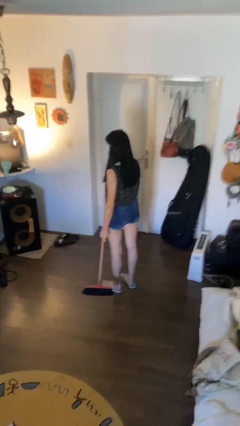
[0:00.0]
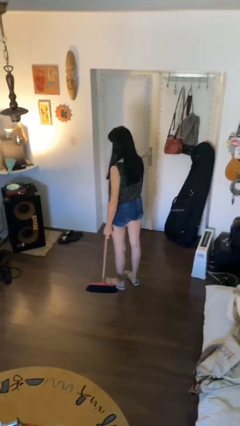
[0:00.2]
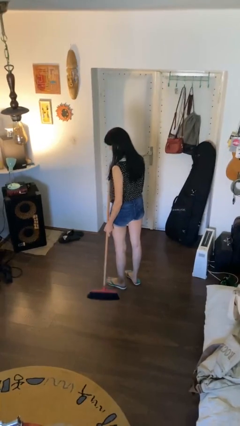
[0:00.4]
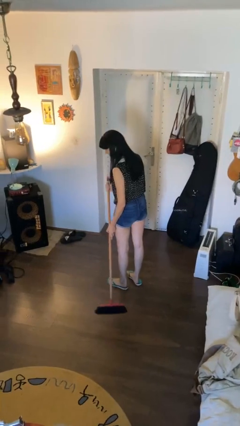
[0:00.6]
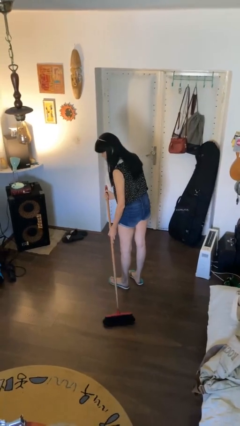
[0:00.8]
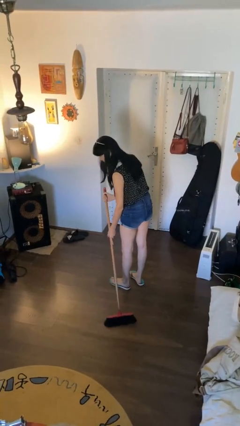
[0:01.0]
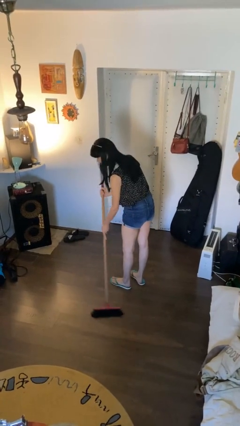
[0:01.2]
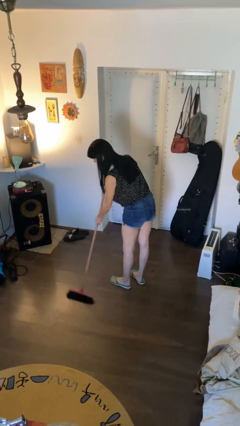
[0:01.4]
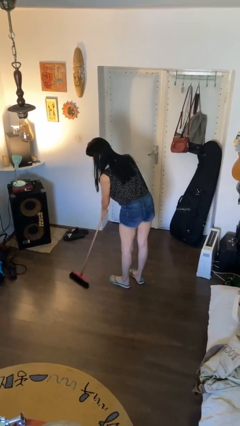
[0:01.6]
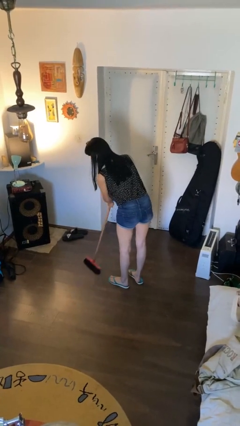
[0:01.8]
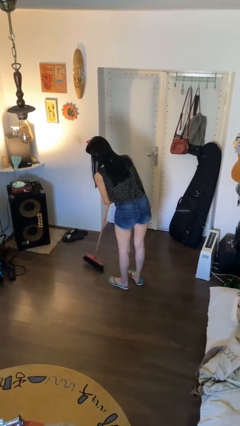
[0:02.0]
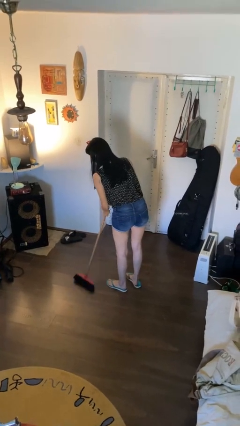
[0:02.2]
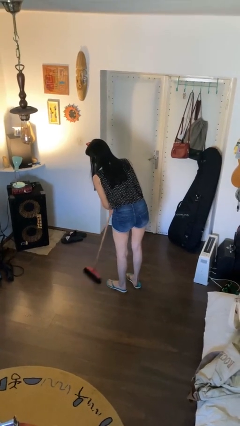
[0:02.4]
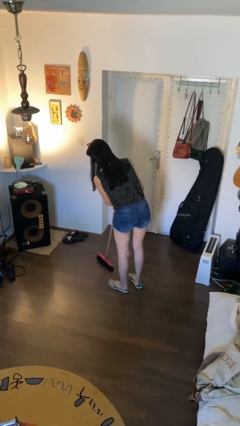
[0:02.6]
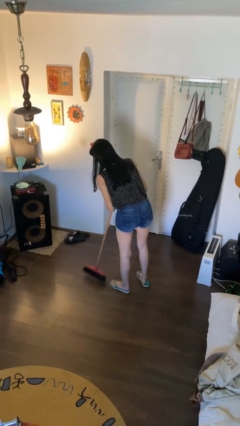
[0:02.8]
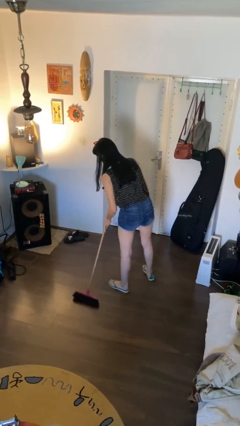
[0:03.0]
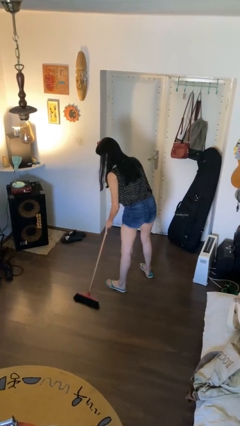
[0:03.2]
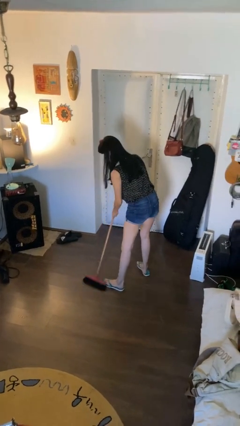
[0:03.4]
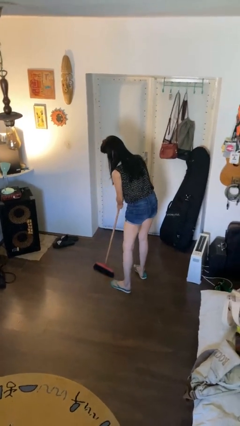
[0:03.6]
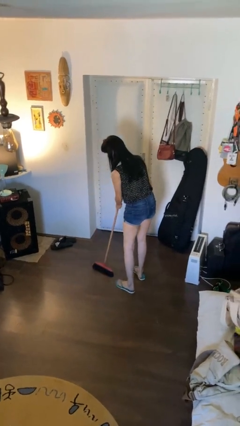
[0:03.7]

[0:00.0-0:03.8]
person sweeps floor

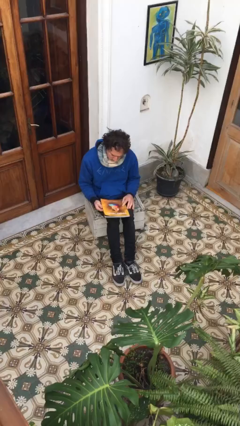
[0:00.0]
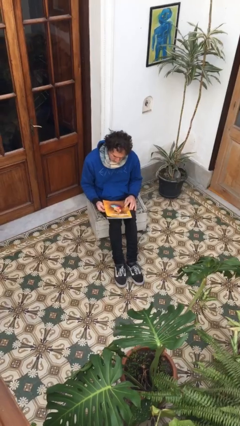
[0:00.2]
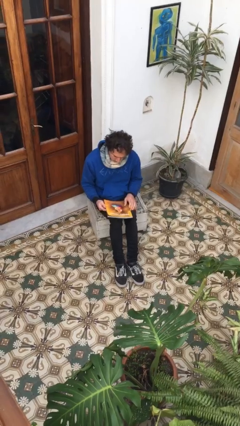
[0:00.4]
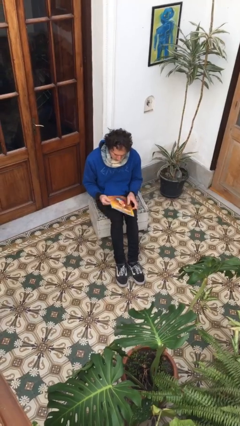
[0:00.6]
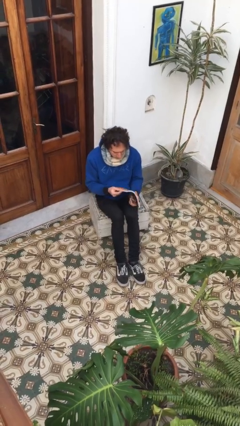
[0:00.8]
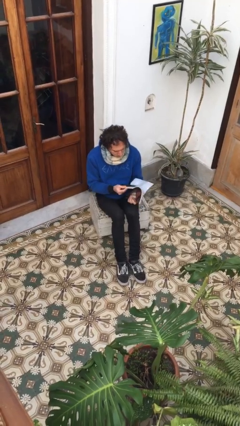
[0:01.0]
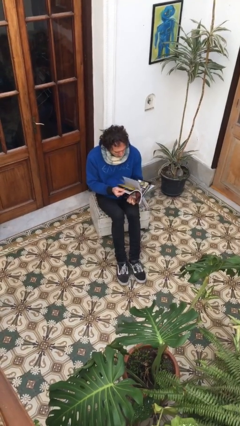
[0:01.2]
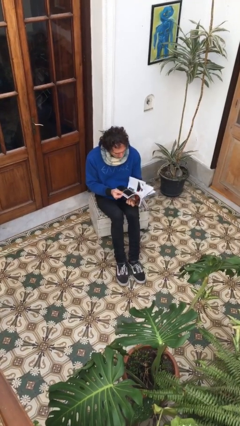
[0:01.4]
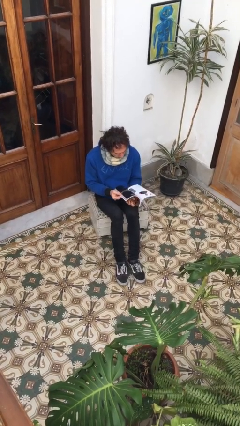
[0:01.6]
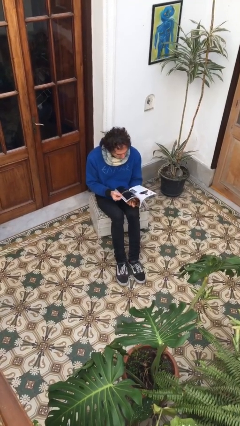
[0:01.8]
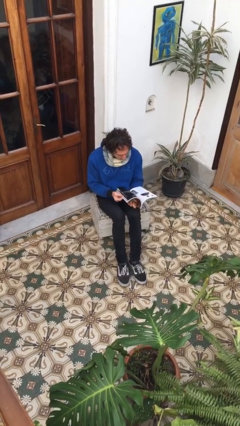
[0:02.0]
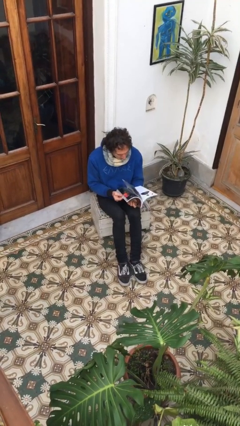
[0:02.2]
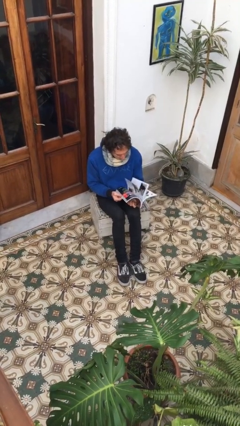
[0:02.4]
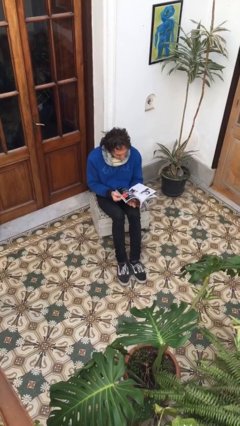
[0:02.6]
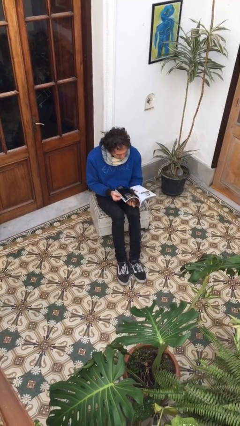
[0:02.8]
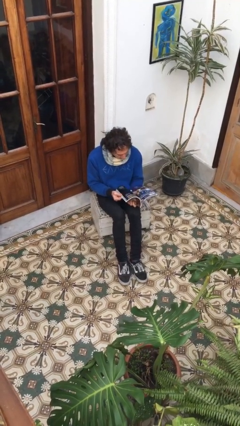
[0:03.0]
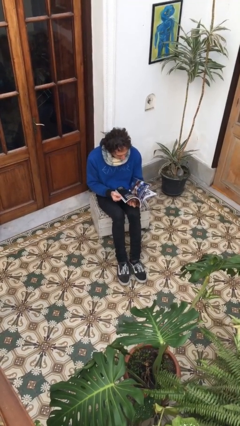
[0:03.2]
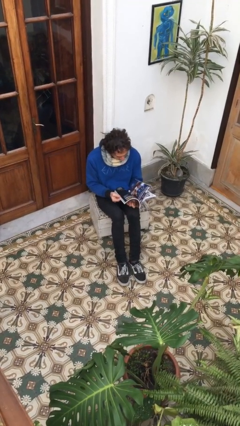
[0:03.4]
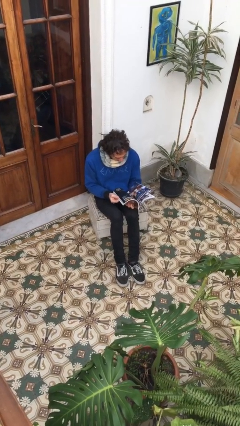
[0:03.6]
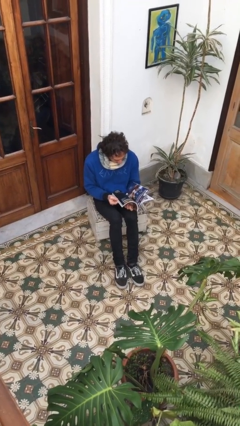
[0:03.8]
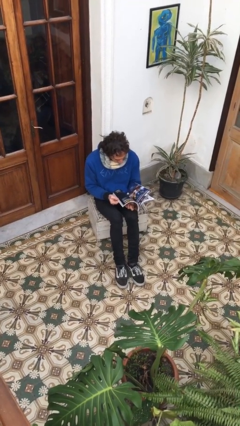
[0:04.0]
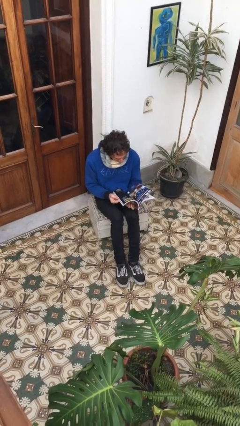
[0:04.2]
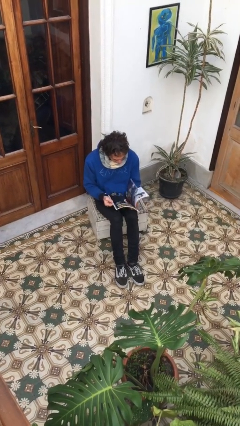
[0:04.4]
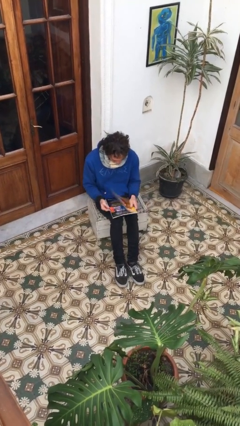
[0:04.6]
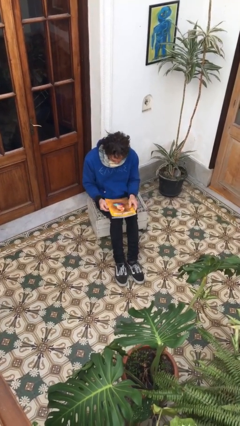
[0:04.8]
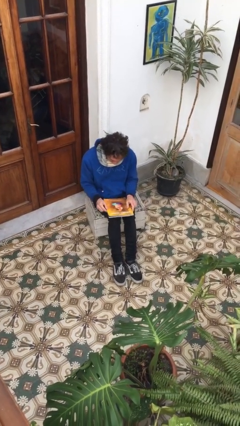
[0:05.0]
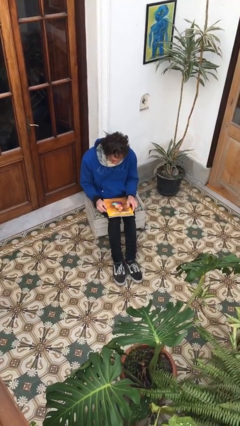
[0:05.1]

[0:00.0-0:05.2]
person reads magazine

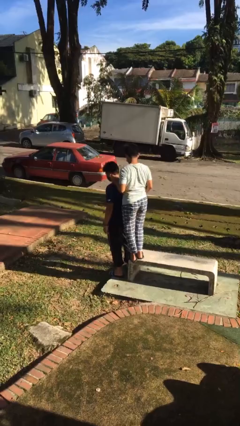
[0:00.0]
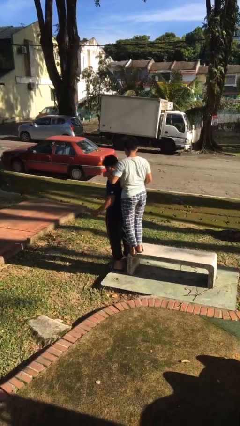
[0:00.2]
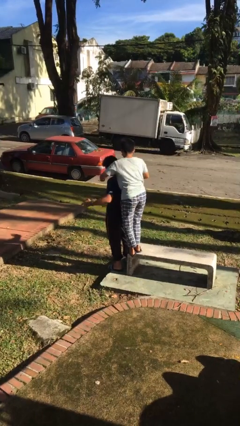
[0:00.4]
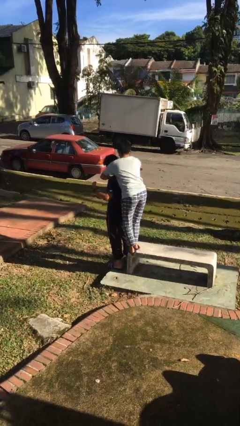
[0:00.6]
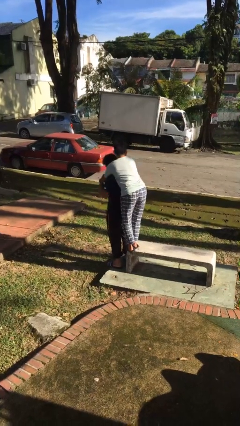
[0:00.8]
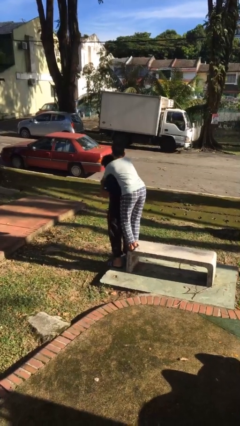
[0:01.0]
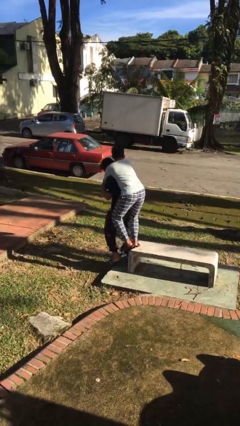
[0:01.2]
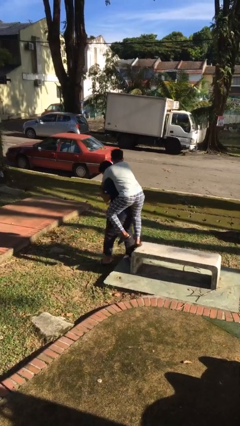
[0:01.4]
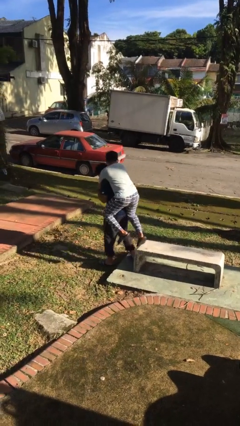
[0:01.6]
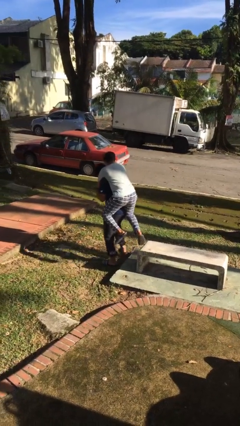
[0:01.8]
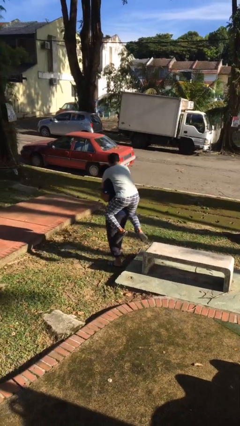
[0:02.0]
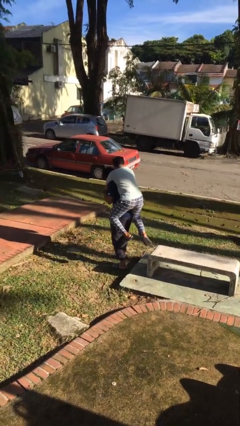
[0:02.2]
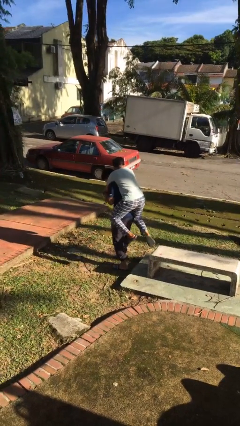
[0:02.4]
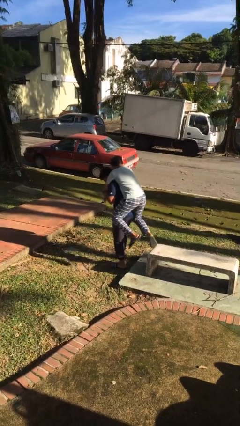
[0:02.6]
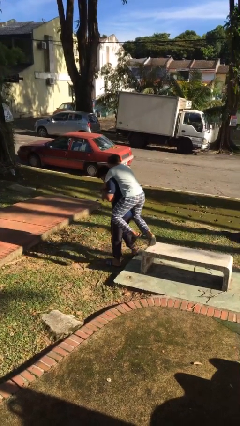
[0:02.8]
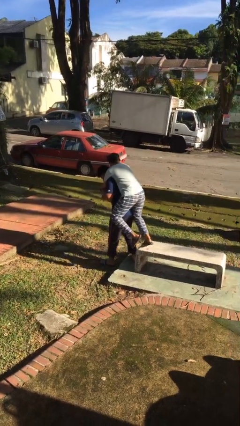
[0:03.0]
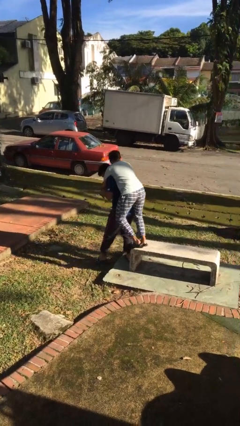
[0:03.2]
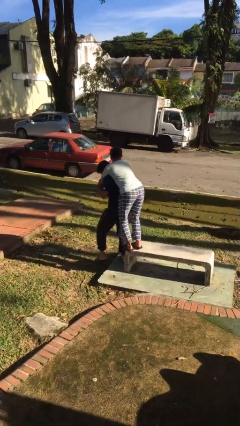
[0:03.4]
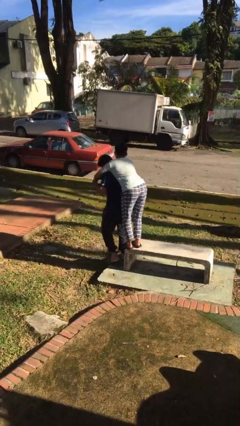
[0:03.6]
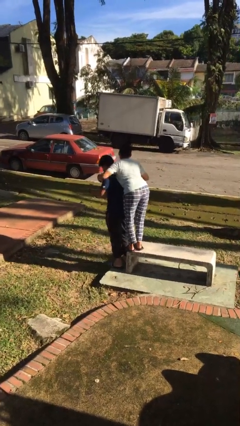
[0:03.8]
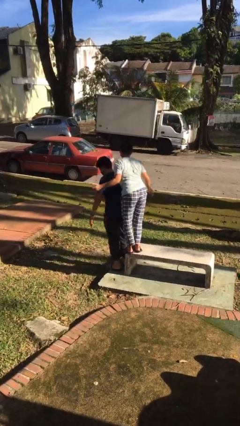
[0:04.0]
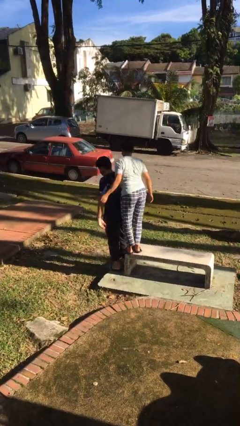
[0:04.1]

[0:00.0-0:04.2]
person carries person on back

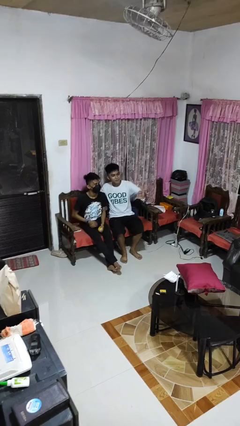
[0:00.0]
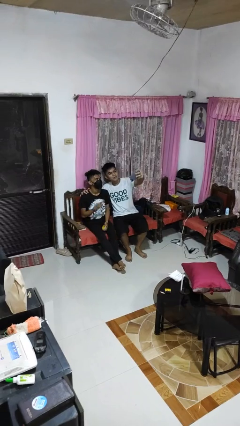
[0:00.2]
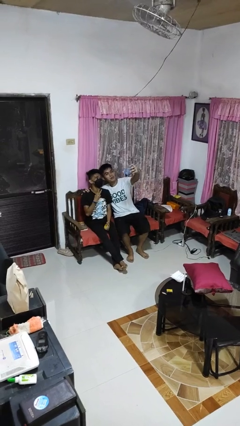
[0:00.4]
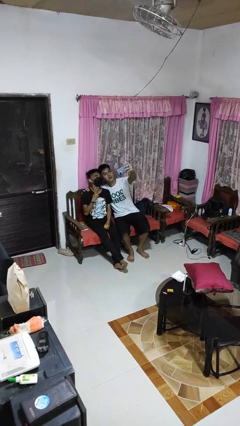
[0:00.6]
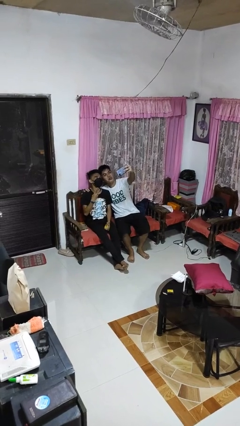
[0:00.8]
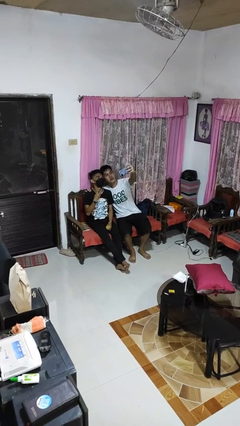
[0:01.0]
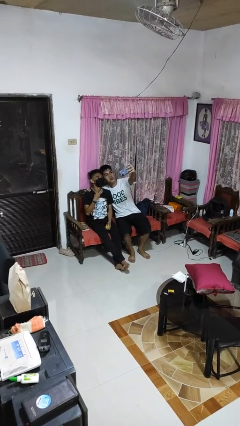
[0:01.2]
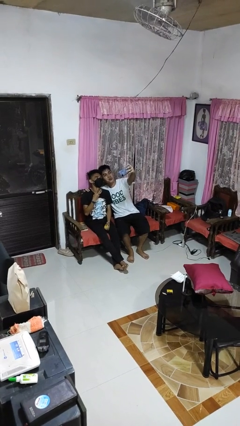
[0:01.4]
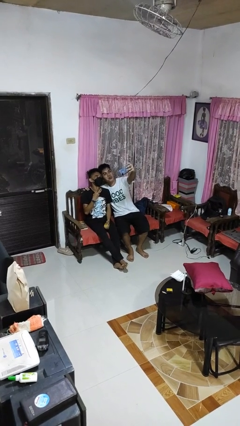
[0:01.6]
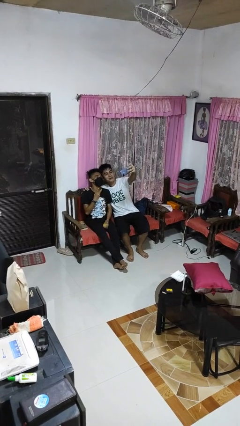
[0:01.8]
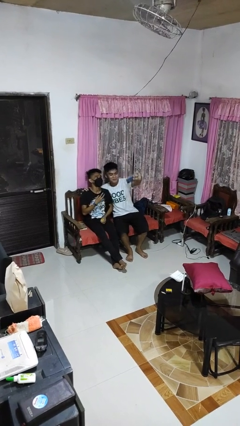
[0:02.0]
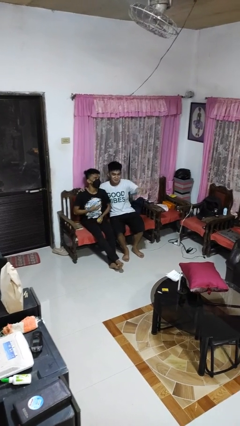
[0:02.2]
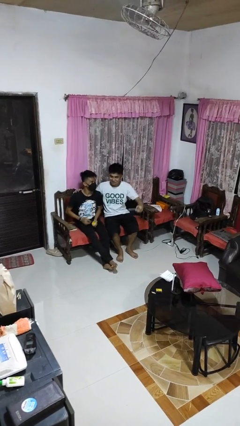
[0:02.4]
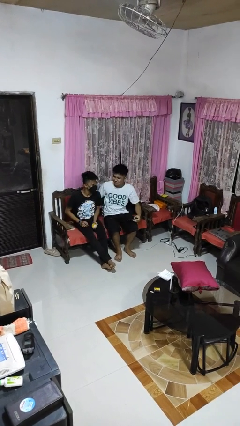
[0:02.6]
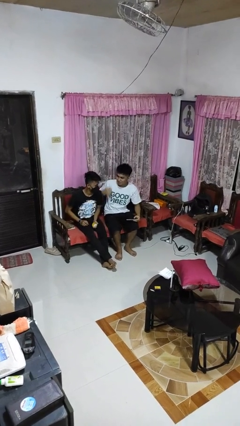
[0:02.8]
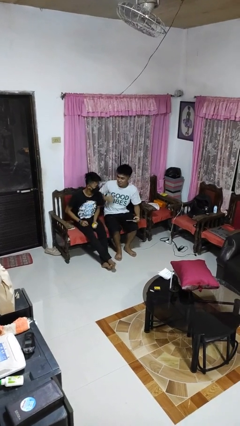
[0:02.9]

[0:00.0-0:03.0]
person takes selfie with person

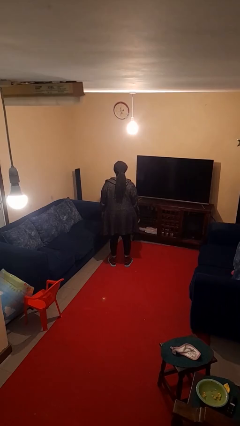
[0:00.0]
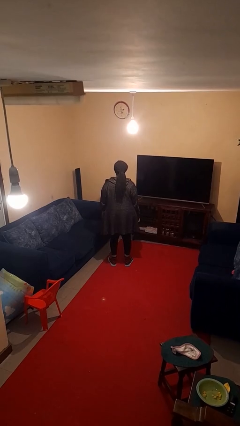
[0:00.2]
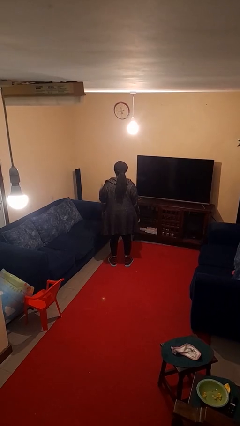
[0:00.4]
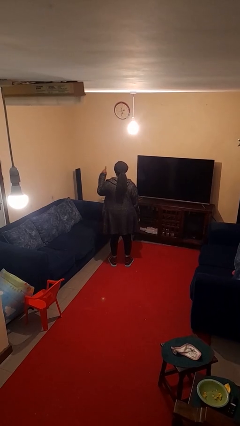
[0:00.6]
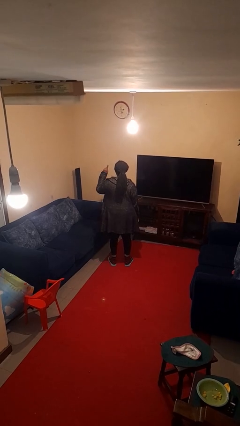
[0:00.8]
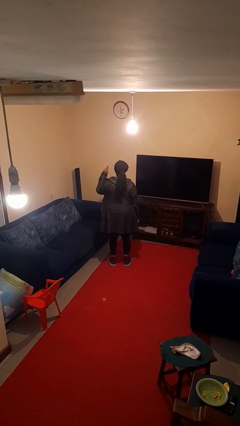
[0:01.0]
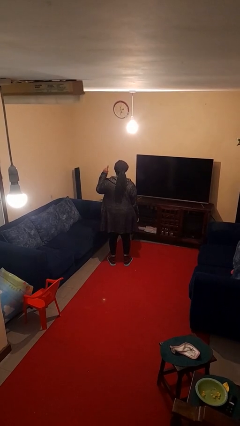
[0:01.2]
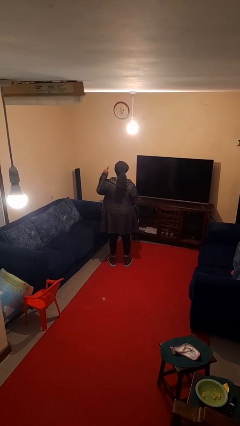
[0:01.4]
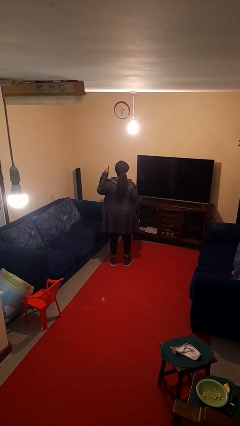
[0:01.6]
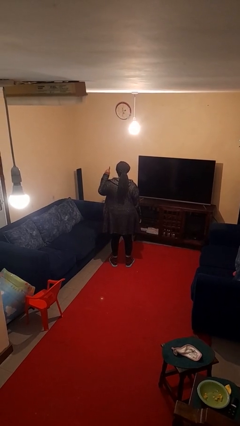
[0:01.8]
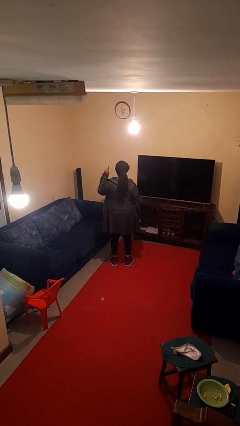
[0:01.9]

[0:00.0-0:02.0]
person gestures number one
